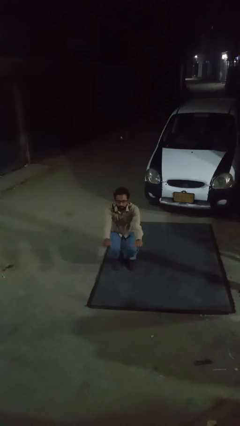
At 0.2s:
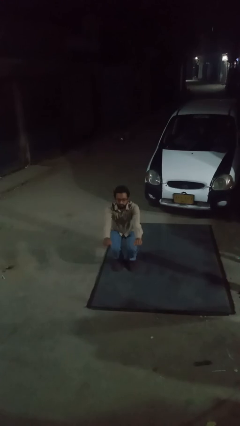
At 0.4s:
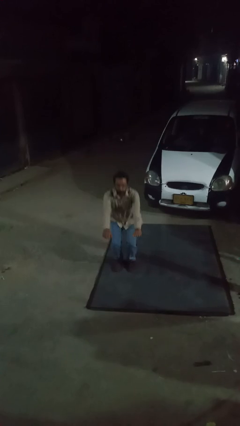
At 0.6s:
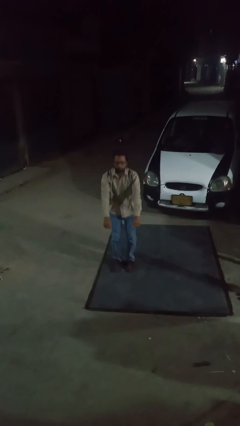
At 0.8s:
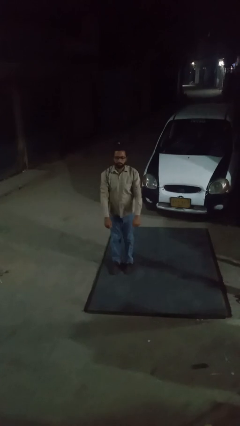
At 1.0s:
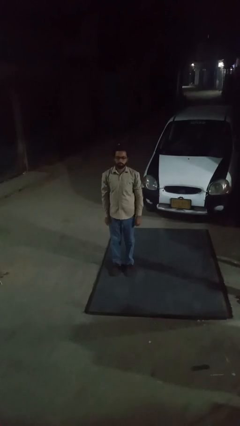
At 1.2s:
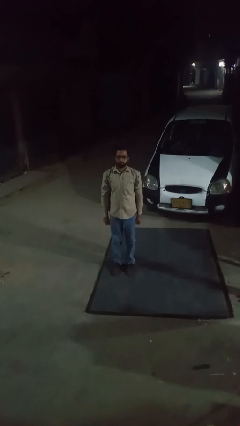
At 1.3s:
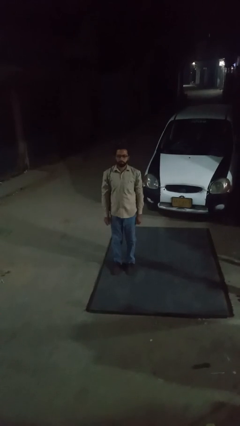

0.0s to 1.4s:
person stands up

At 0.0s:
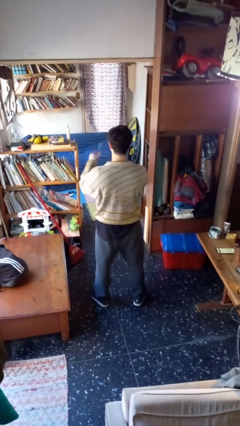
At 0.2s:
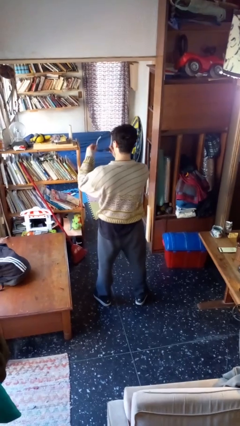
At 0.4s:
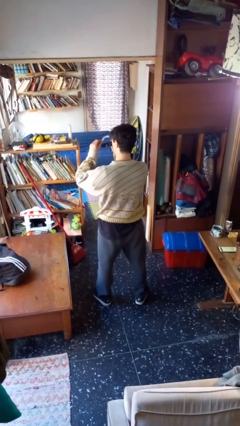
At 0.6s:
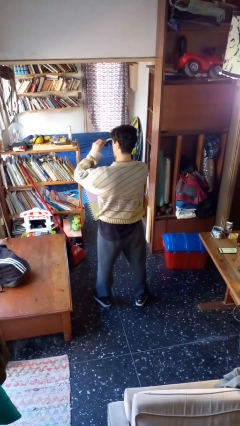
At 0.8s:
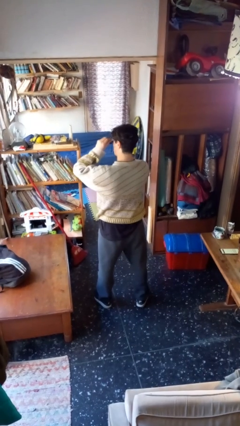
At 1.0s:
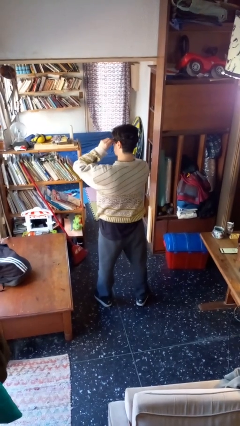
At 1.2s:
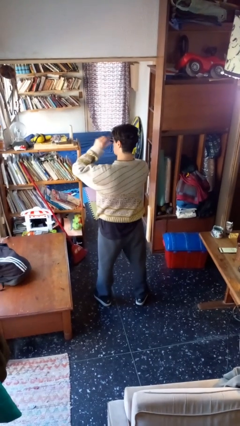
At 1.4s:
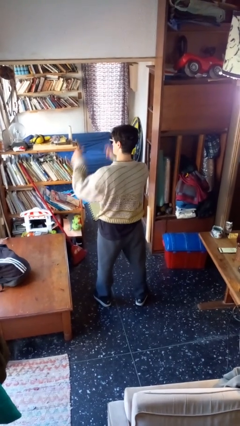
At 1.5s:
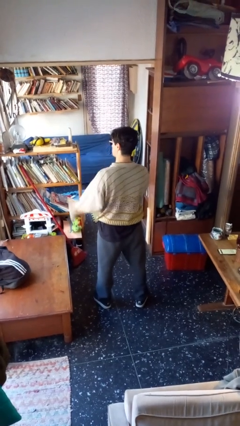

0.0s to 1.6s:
person puts on sunglasses

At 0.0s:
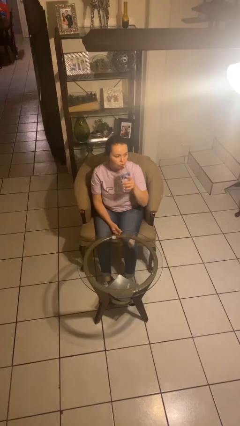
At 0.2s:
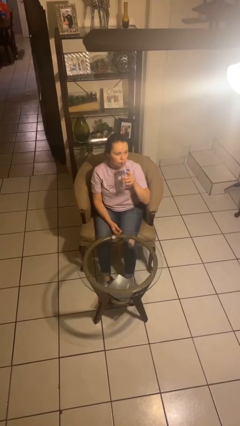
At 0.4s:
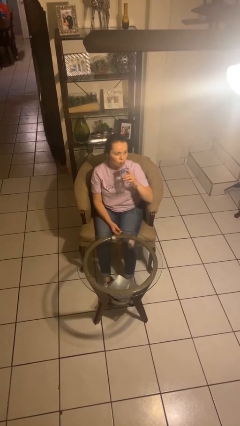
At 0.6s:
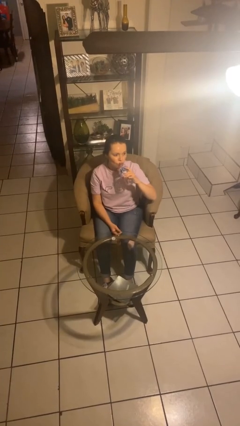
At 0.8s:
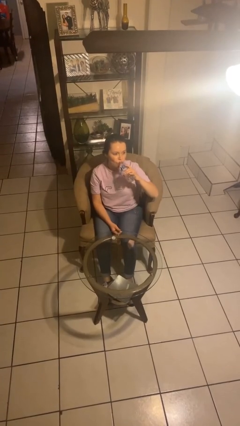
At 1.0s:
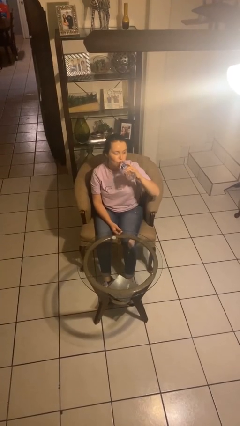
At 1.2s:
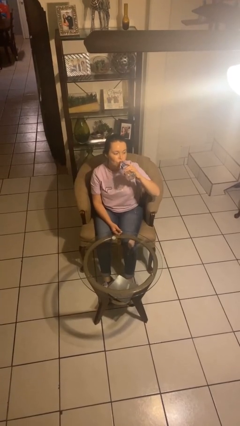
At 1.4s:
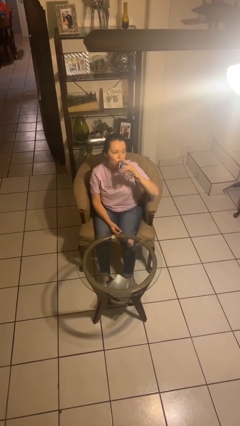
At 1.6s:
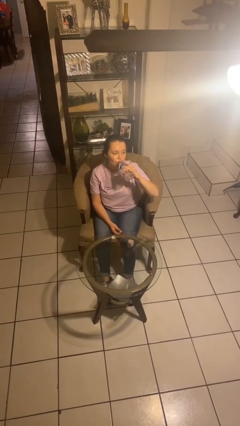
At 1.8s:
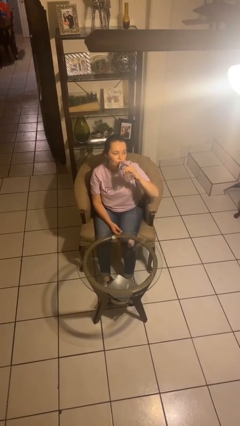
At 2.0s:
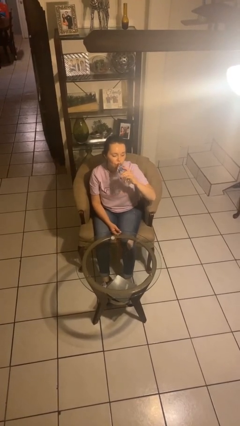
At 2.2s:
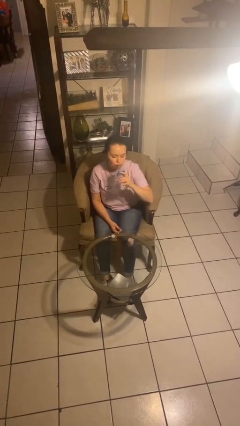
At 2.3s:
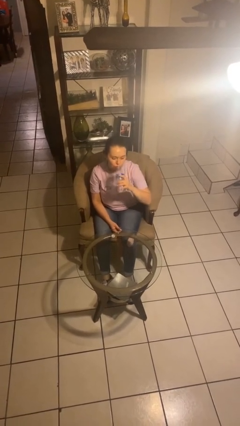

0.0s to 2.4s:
person drinks from bottle

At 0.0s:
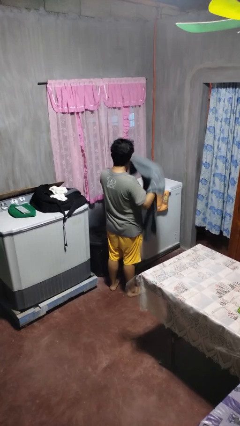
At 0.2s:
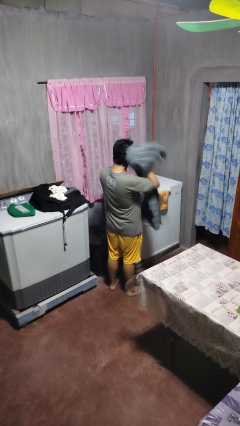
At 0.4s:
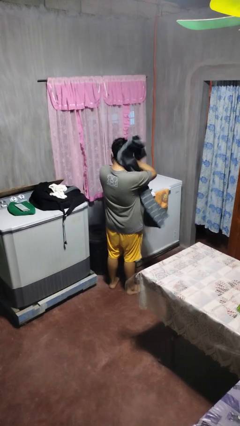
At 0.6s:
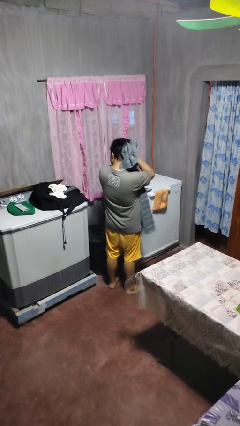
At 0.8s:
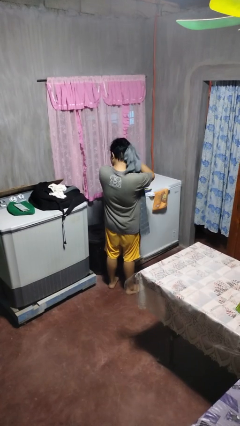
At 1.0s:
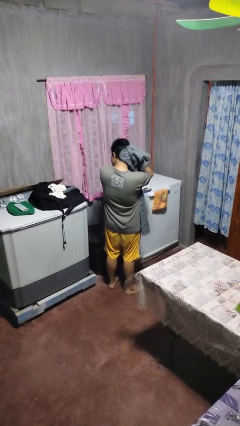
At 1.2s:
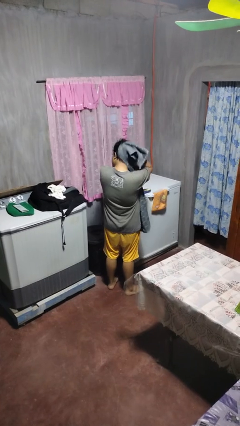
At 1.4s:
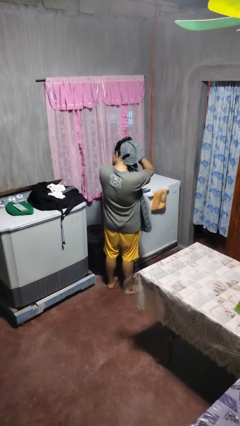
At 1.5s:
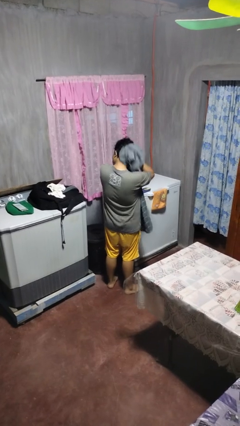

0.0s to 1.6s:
person dries hair with towel

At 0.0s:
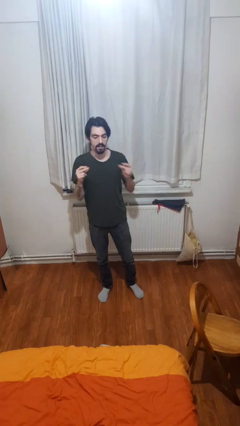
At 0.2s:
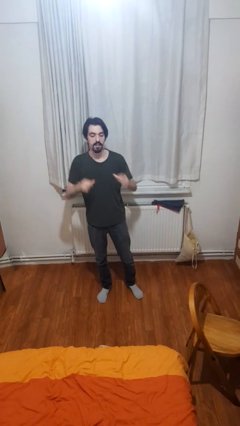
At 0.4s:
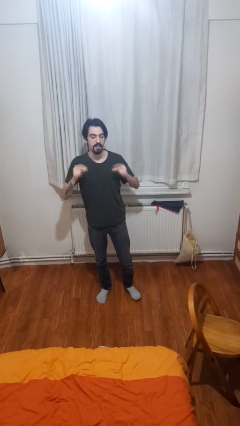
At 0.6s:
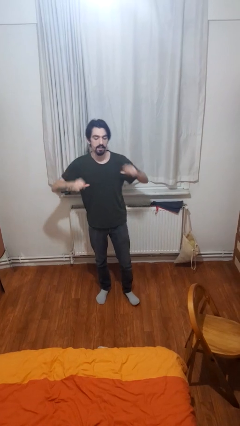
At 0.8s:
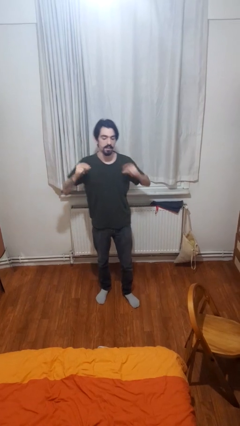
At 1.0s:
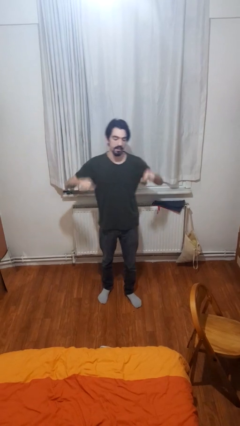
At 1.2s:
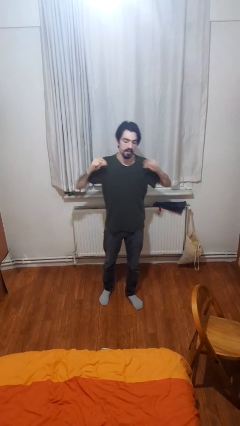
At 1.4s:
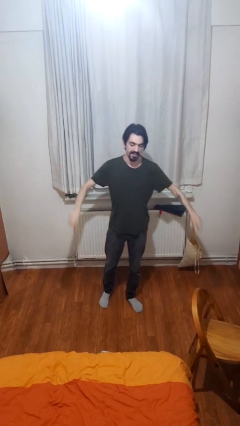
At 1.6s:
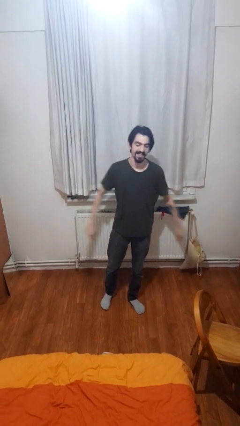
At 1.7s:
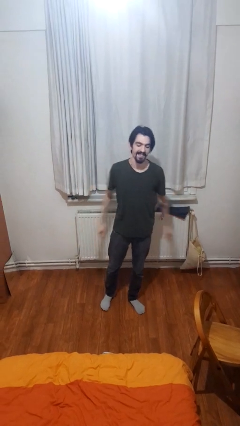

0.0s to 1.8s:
person snaps fingers

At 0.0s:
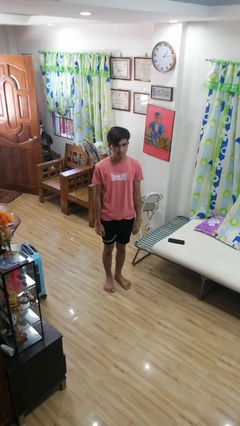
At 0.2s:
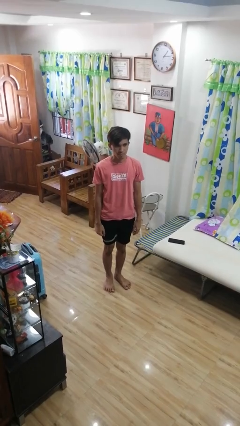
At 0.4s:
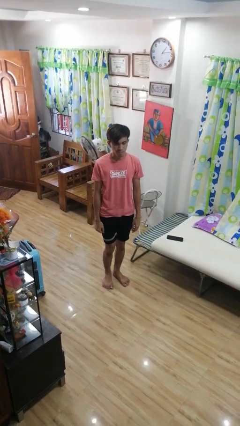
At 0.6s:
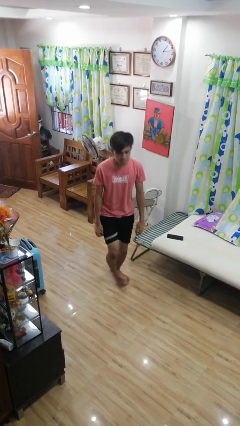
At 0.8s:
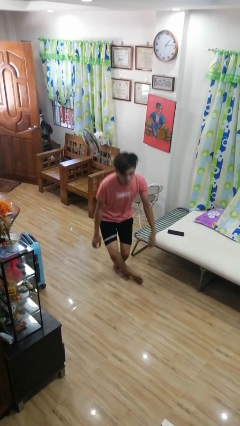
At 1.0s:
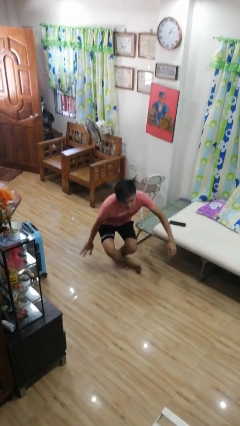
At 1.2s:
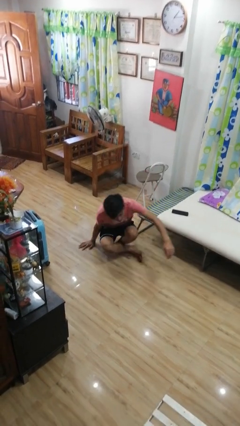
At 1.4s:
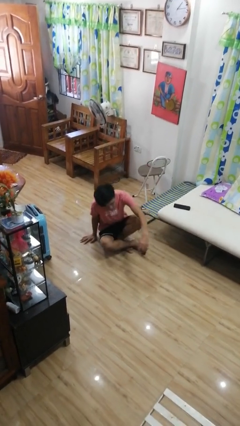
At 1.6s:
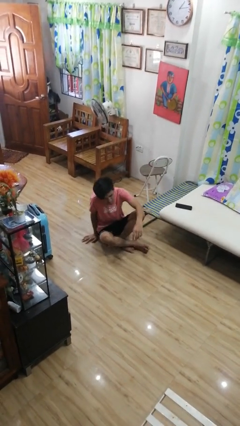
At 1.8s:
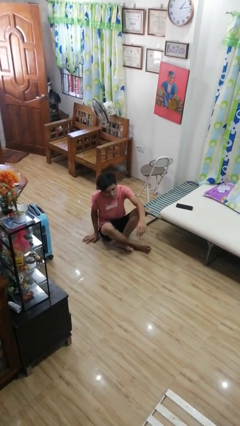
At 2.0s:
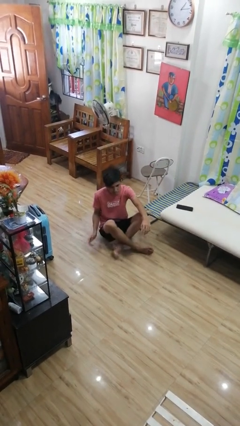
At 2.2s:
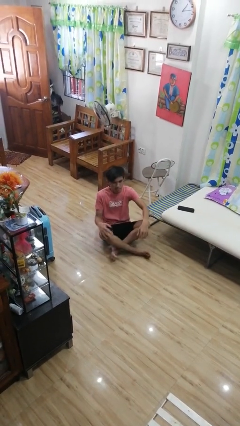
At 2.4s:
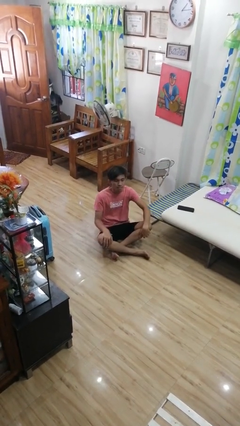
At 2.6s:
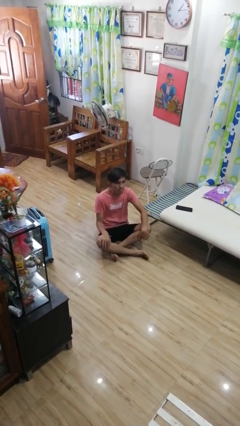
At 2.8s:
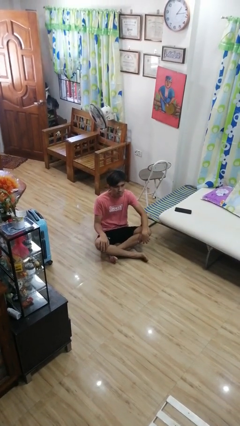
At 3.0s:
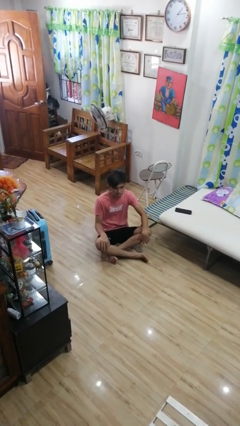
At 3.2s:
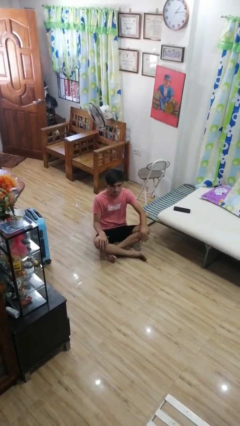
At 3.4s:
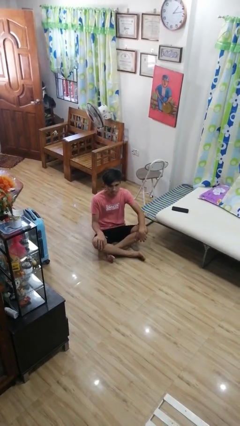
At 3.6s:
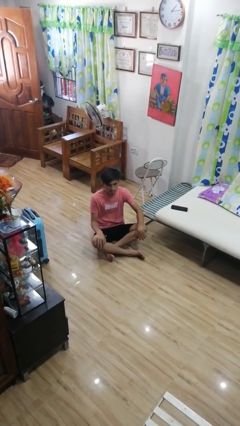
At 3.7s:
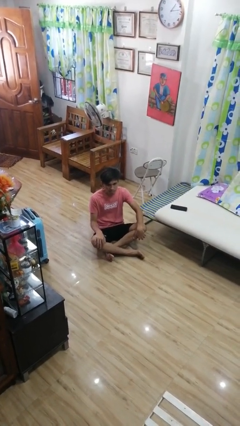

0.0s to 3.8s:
person sits crisscross

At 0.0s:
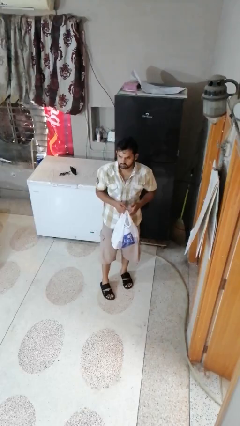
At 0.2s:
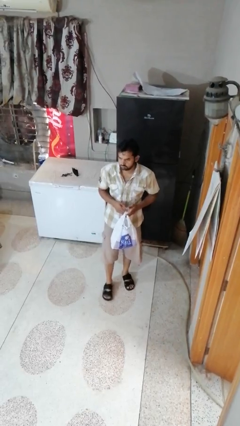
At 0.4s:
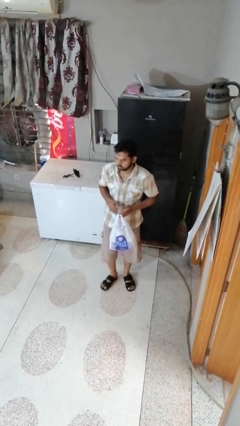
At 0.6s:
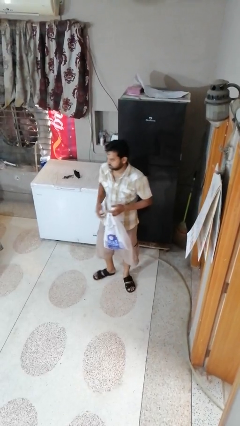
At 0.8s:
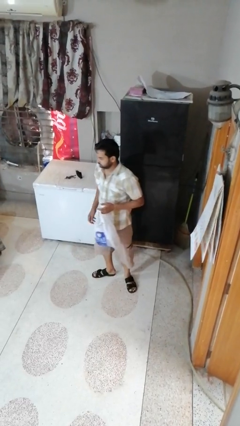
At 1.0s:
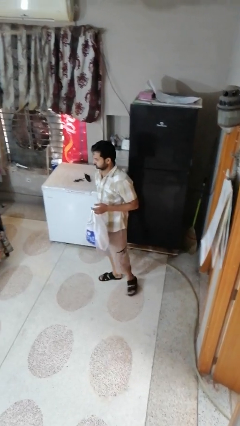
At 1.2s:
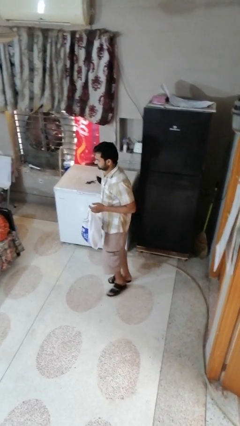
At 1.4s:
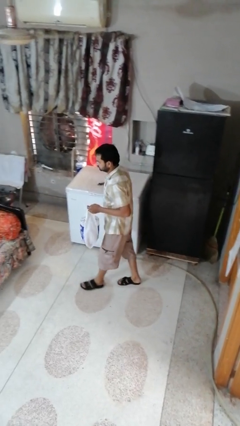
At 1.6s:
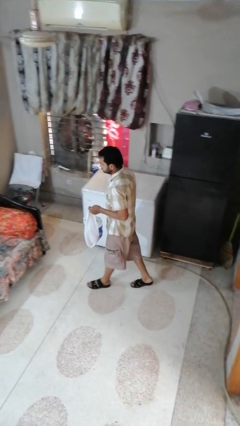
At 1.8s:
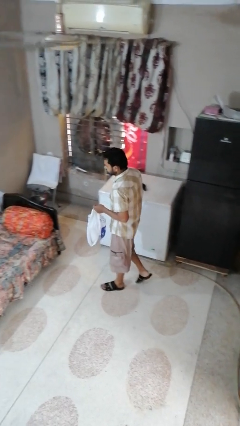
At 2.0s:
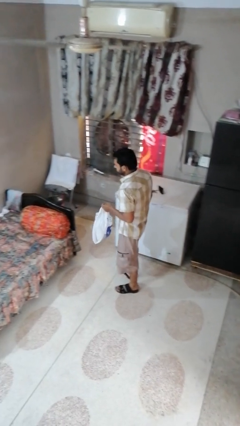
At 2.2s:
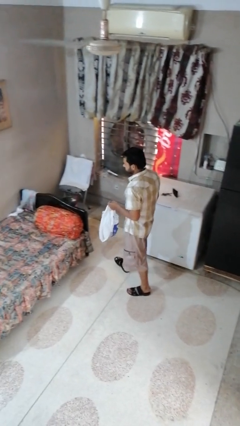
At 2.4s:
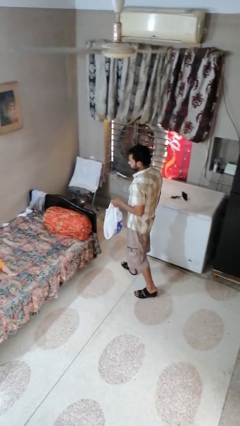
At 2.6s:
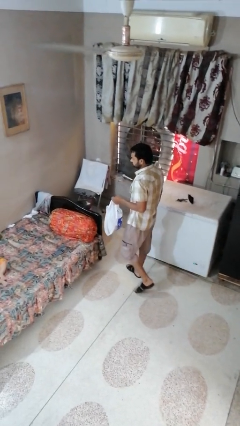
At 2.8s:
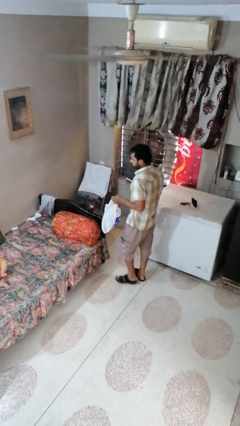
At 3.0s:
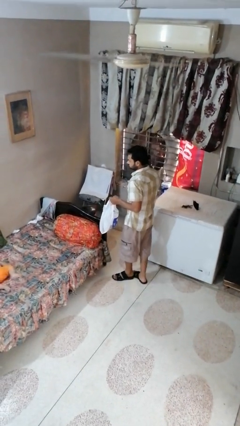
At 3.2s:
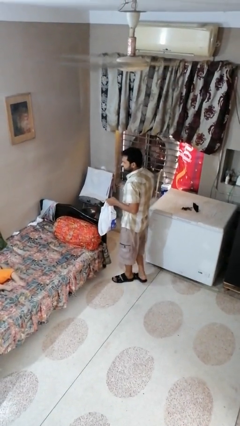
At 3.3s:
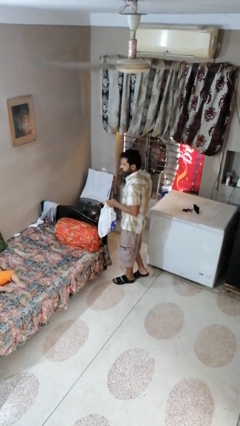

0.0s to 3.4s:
person carries groceries

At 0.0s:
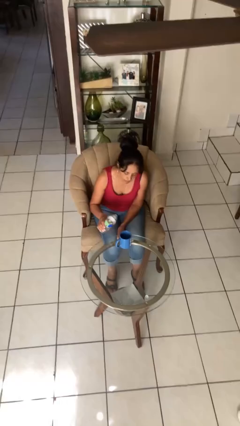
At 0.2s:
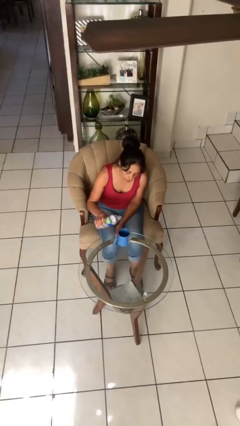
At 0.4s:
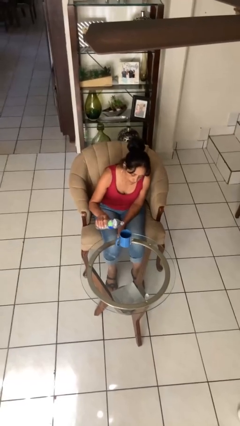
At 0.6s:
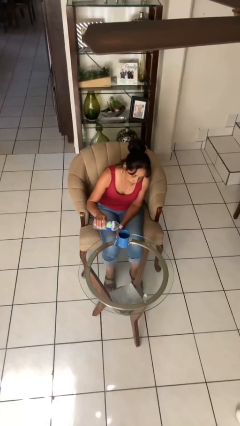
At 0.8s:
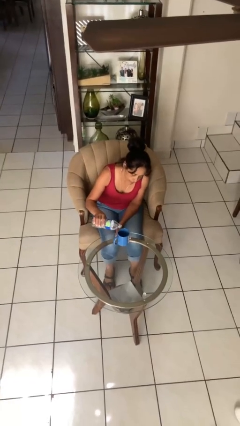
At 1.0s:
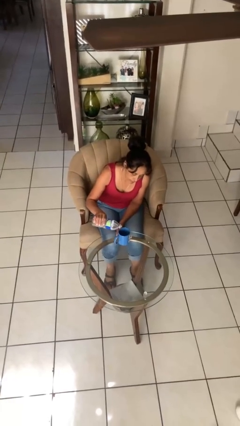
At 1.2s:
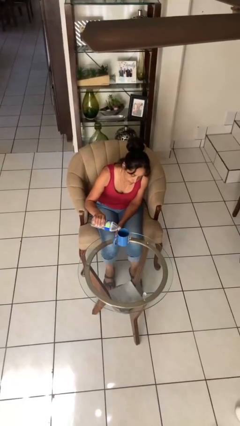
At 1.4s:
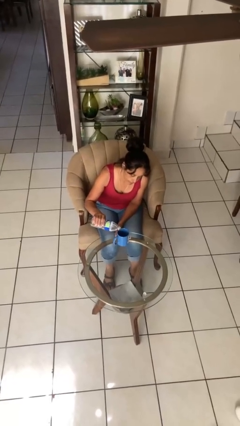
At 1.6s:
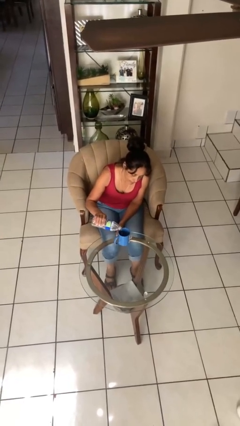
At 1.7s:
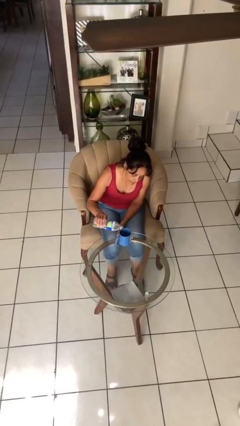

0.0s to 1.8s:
person pours liquid into cup
